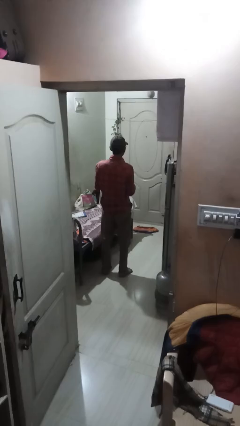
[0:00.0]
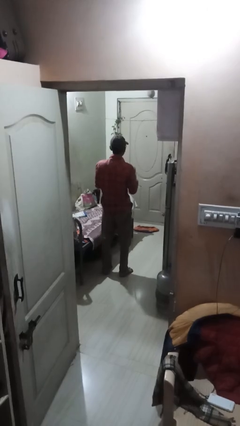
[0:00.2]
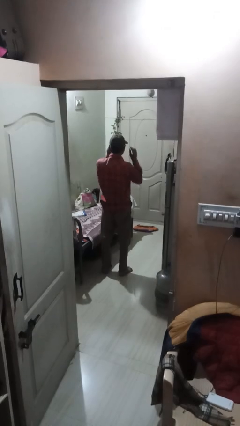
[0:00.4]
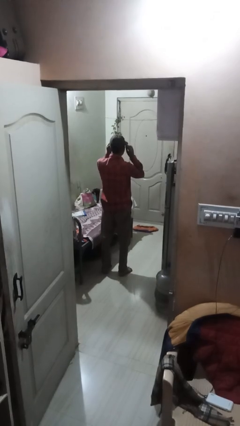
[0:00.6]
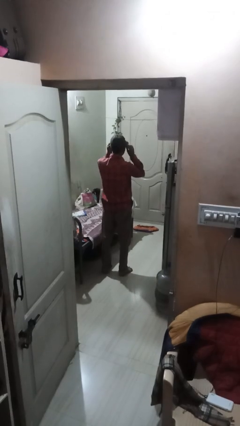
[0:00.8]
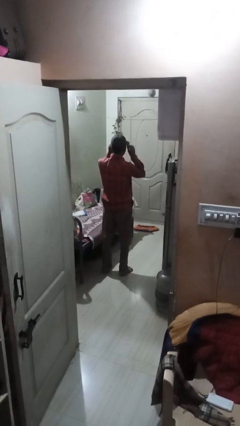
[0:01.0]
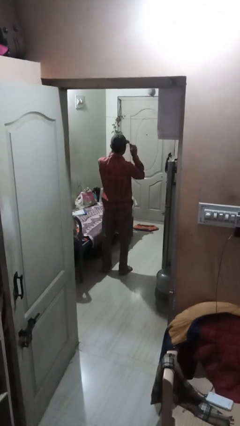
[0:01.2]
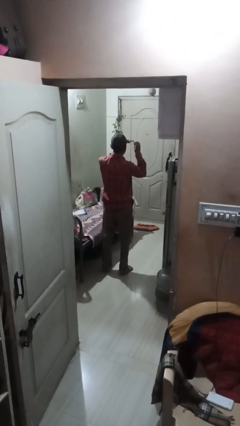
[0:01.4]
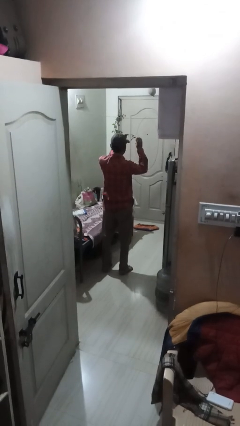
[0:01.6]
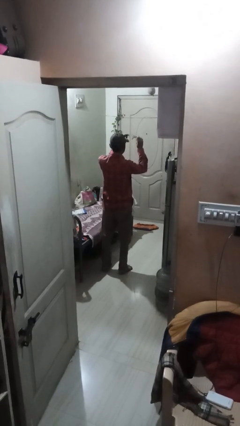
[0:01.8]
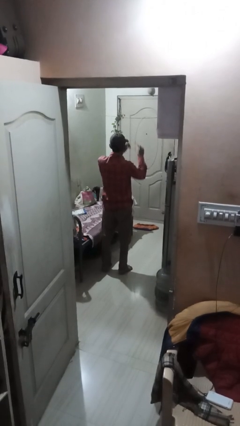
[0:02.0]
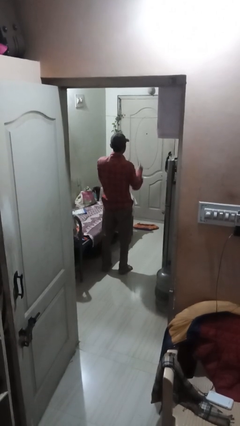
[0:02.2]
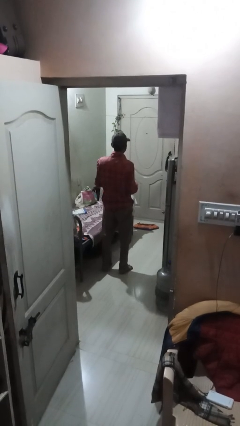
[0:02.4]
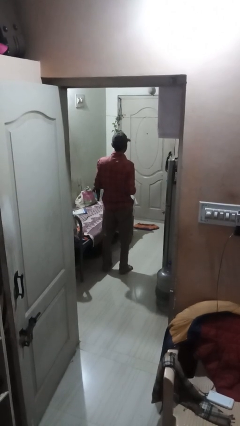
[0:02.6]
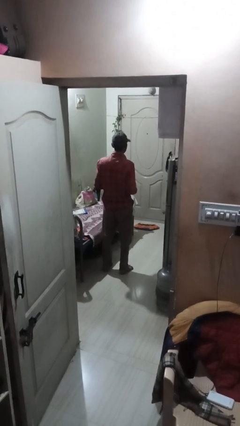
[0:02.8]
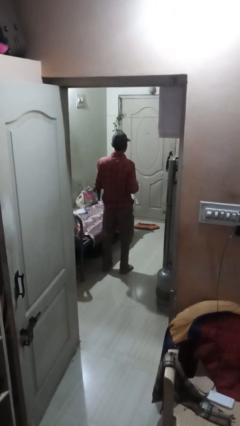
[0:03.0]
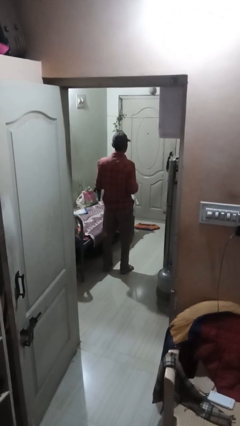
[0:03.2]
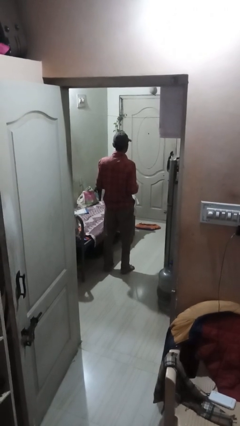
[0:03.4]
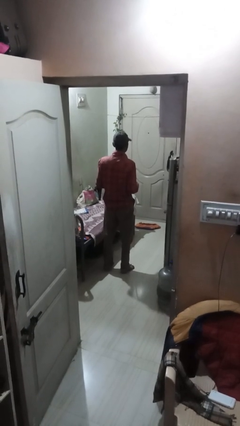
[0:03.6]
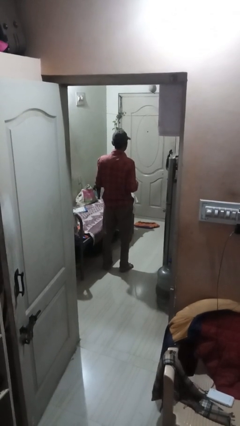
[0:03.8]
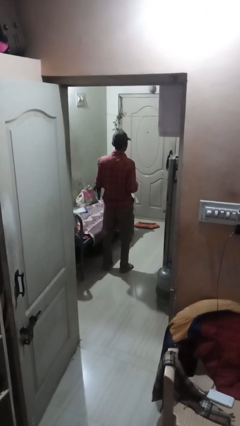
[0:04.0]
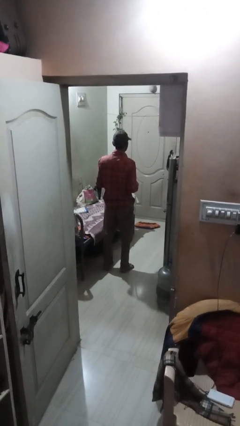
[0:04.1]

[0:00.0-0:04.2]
person takes off glasses

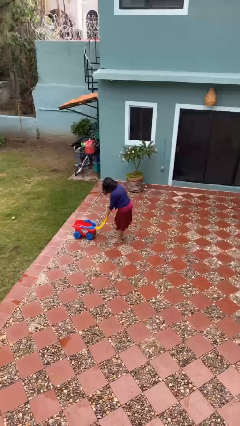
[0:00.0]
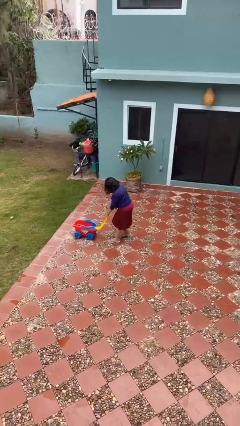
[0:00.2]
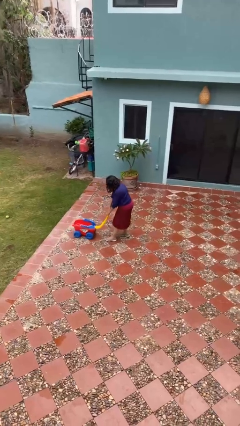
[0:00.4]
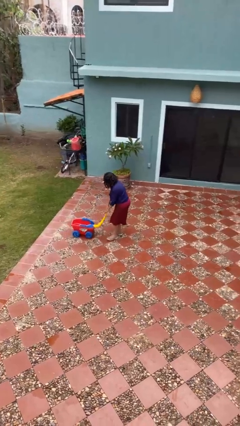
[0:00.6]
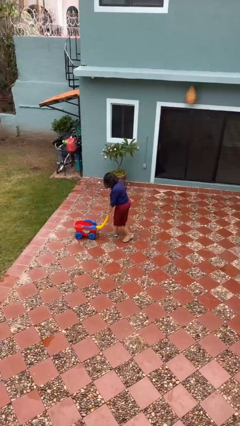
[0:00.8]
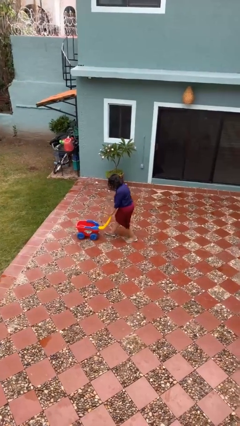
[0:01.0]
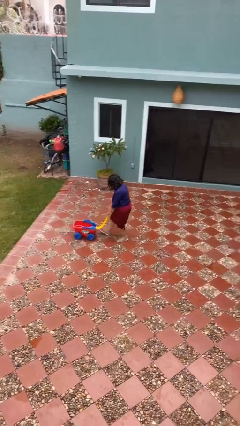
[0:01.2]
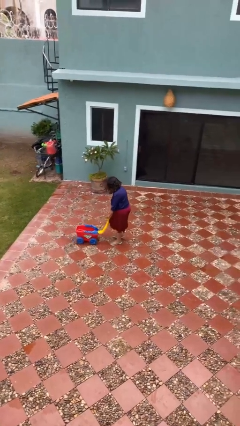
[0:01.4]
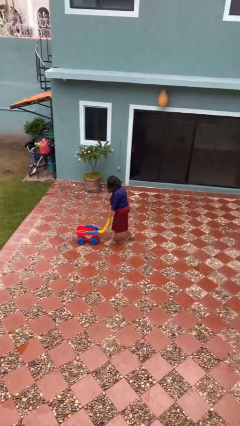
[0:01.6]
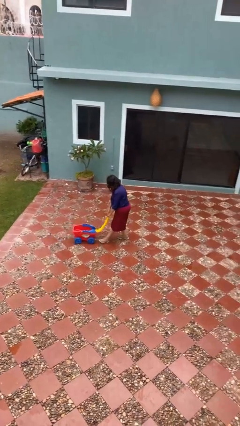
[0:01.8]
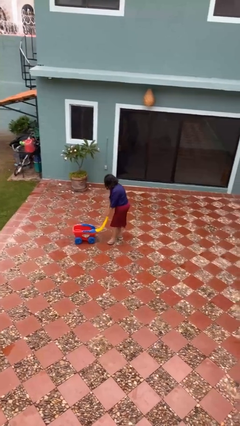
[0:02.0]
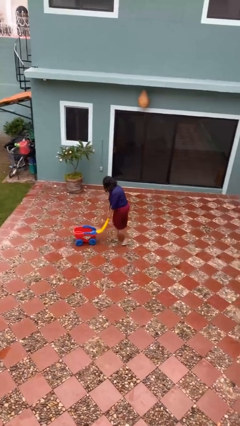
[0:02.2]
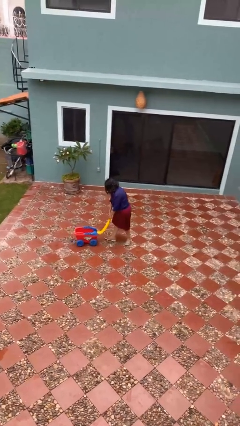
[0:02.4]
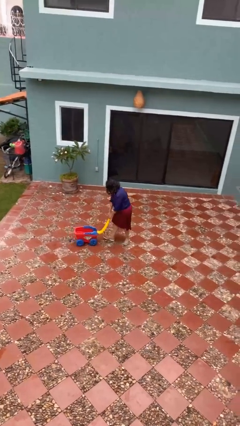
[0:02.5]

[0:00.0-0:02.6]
person pulls wheeled cart

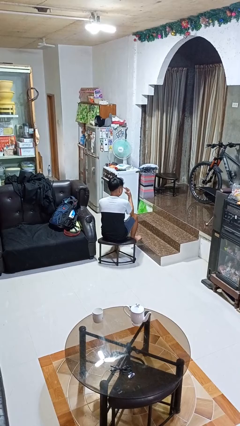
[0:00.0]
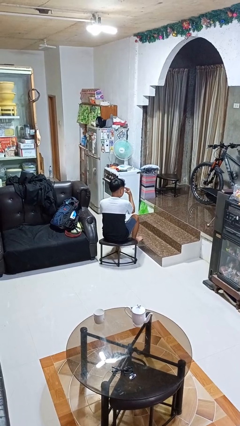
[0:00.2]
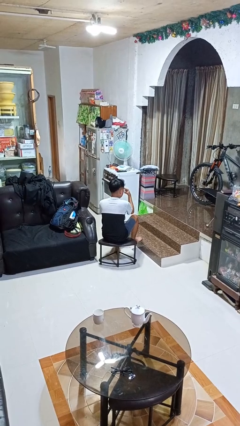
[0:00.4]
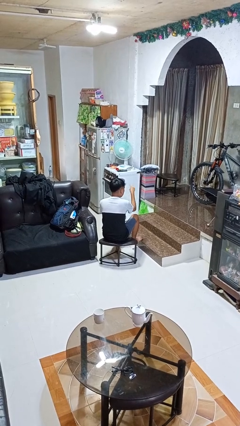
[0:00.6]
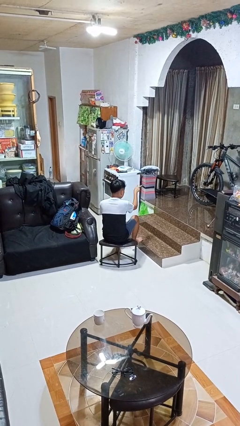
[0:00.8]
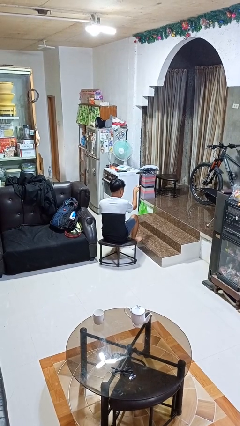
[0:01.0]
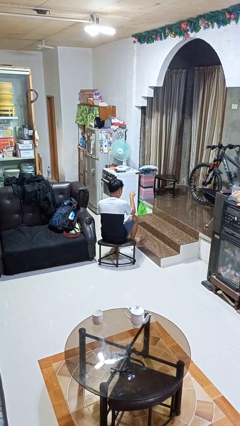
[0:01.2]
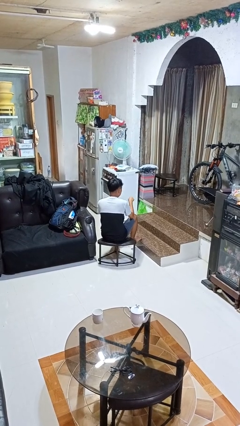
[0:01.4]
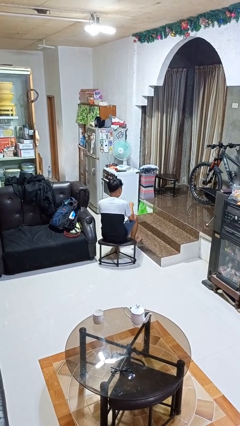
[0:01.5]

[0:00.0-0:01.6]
person gestures watch closely

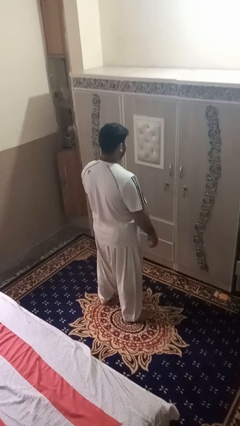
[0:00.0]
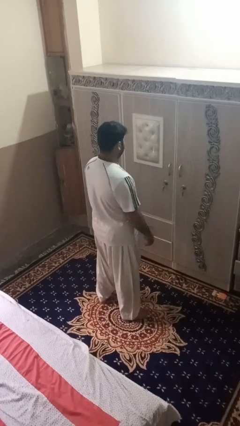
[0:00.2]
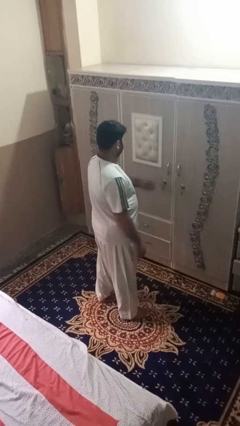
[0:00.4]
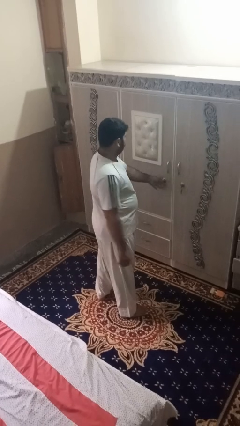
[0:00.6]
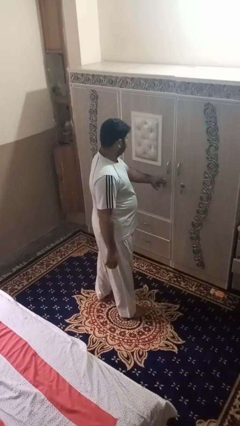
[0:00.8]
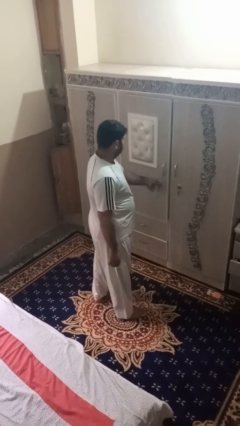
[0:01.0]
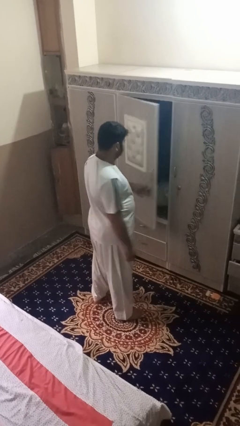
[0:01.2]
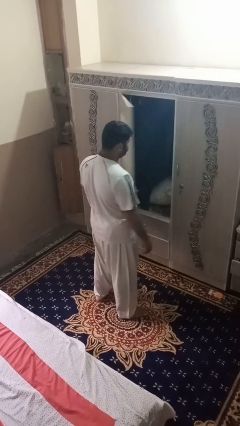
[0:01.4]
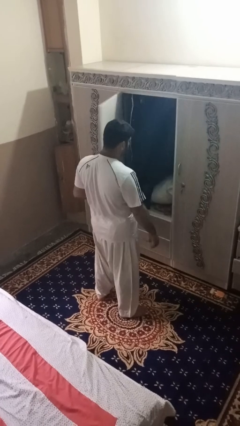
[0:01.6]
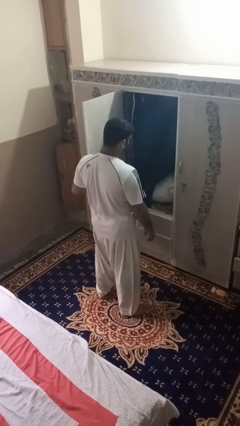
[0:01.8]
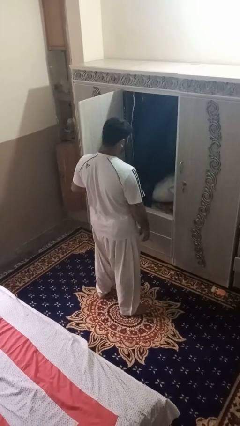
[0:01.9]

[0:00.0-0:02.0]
person opens dresser drawer

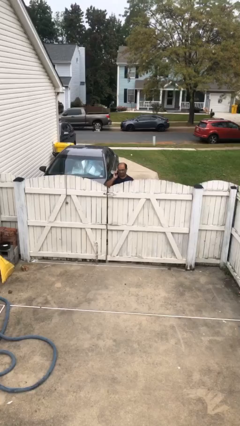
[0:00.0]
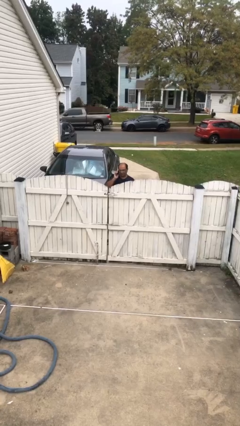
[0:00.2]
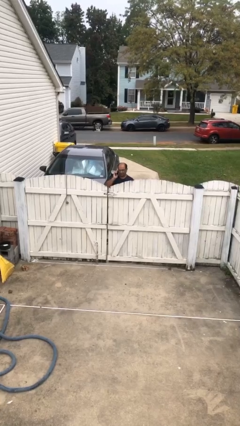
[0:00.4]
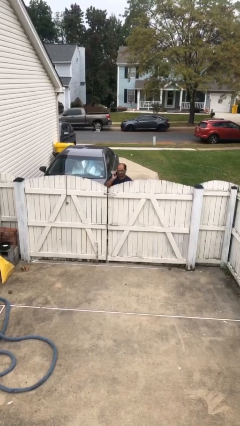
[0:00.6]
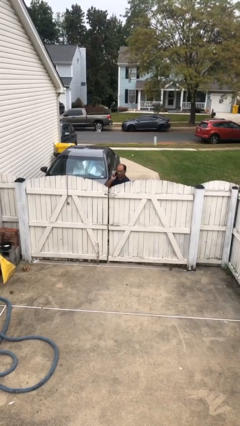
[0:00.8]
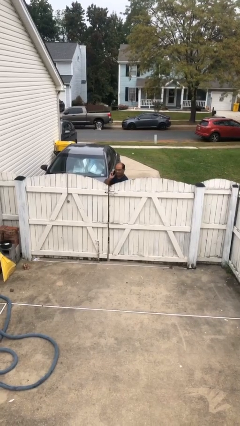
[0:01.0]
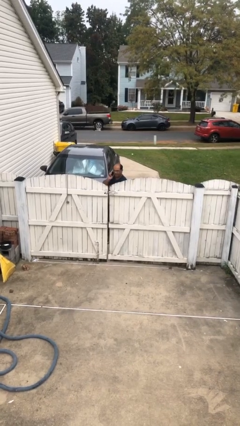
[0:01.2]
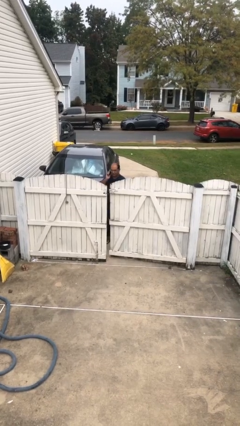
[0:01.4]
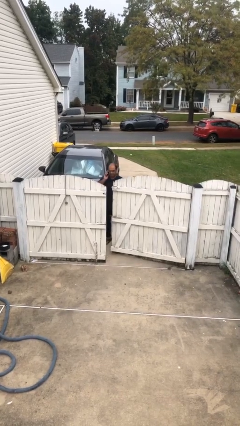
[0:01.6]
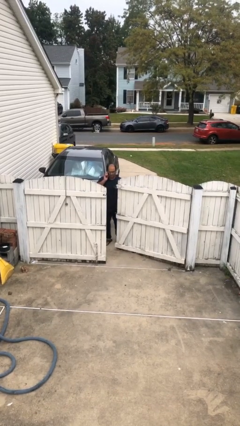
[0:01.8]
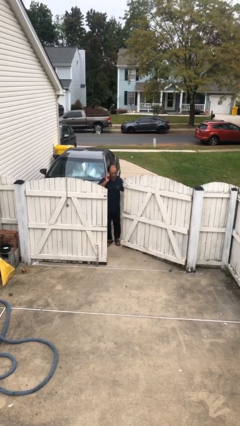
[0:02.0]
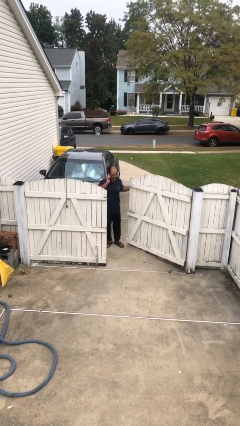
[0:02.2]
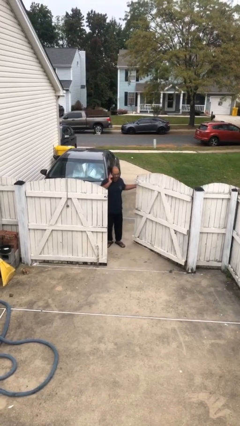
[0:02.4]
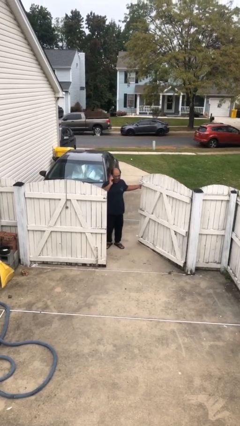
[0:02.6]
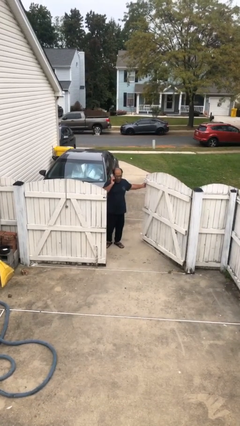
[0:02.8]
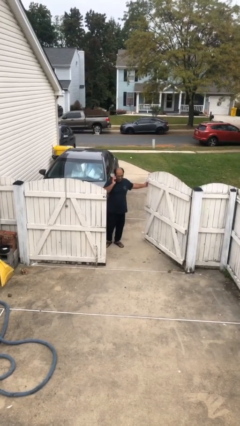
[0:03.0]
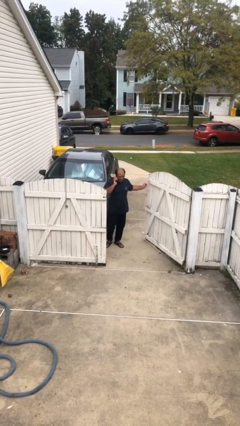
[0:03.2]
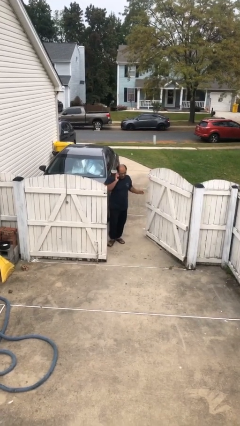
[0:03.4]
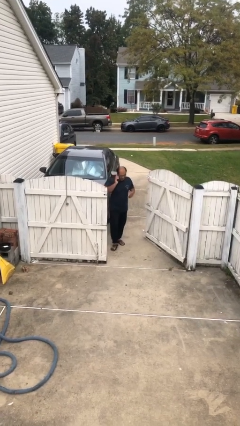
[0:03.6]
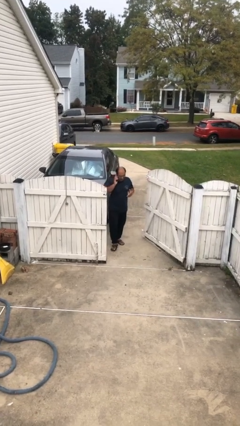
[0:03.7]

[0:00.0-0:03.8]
person opens facility door

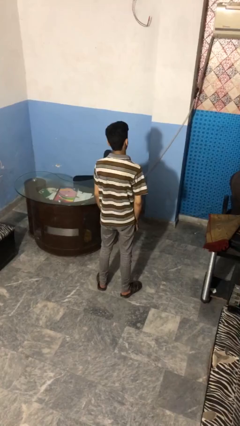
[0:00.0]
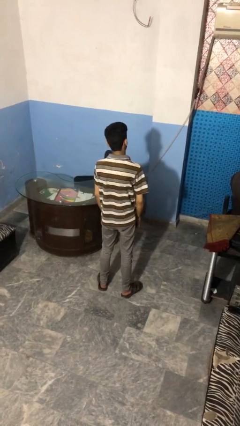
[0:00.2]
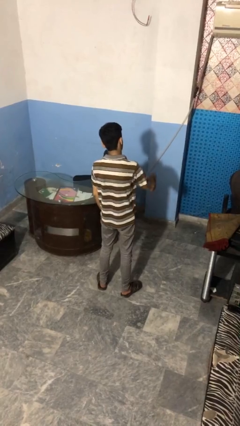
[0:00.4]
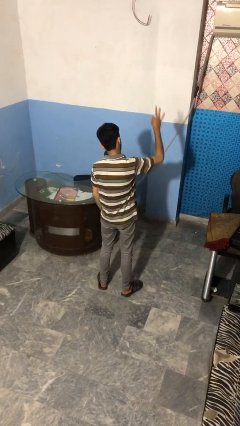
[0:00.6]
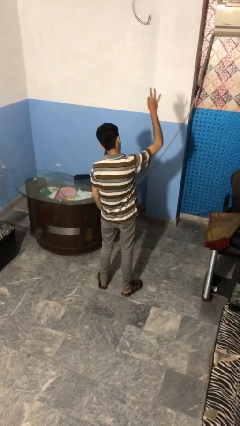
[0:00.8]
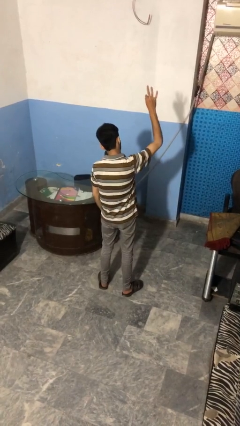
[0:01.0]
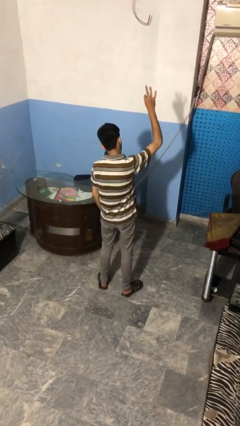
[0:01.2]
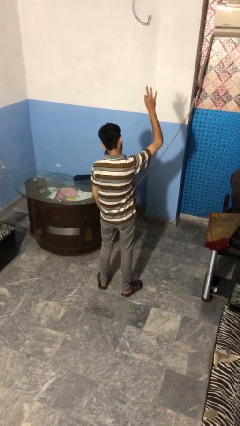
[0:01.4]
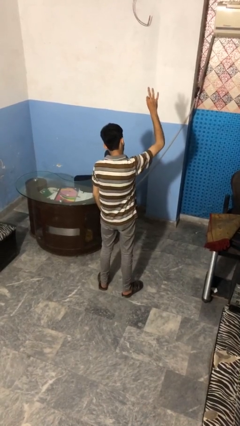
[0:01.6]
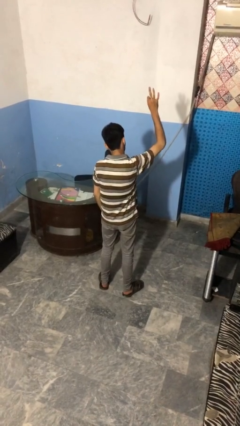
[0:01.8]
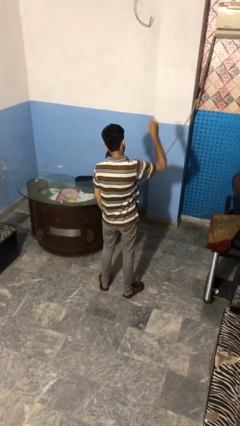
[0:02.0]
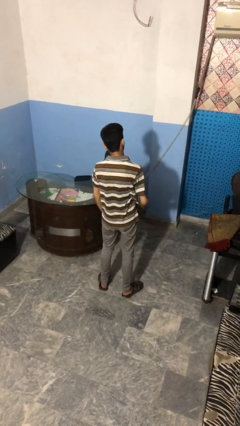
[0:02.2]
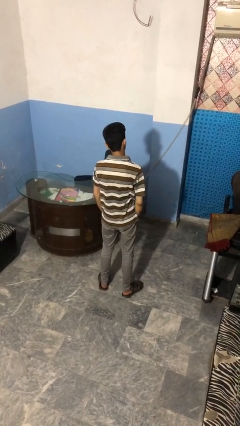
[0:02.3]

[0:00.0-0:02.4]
person gestures number three
